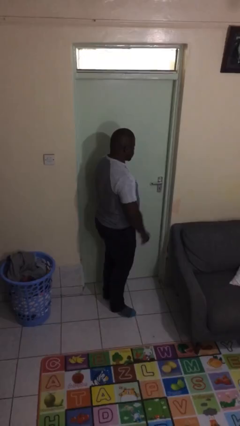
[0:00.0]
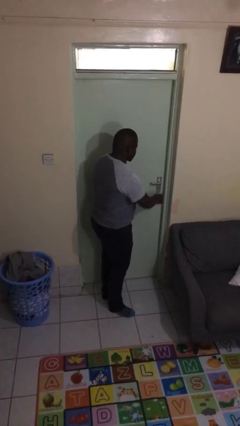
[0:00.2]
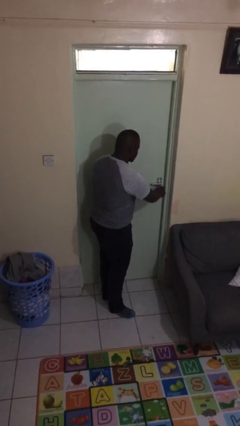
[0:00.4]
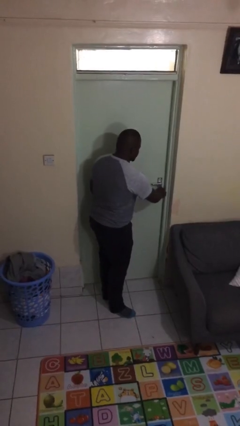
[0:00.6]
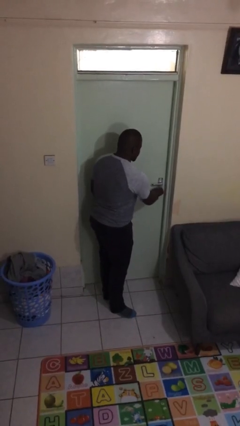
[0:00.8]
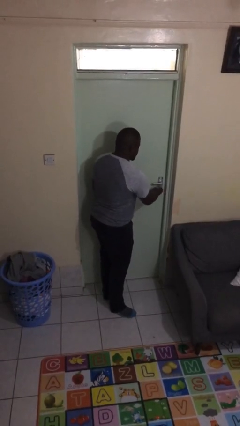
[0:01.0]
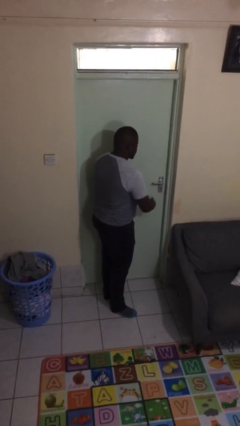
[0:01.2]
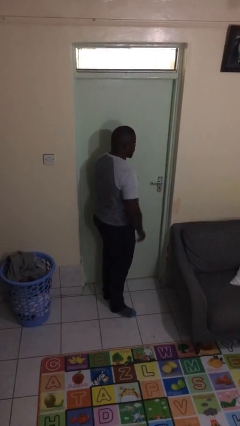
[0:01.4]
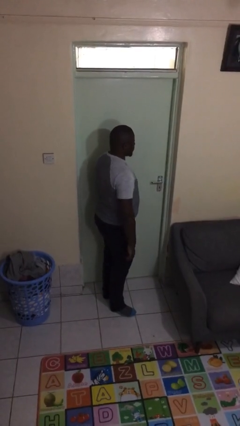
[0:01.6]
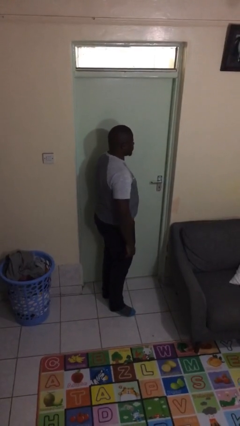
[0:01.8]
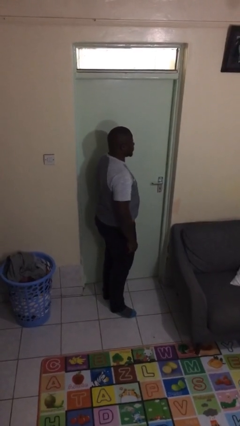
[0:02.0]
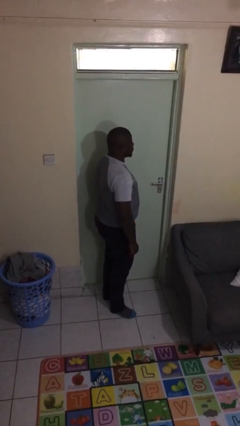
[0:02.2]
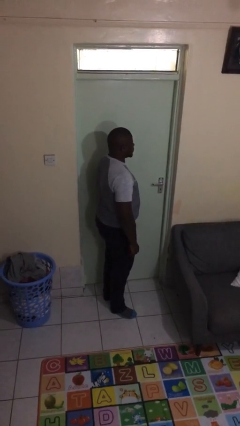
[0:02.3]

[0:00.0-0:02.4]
person locks door with keys

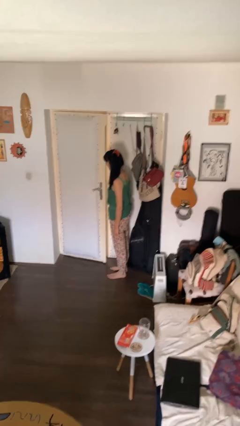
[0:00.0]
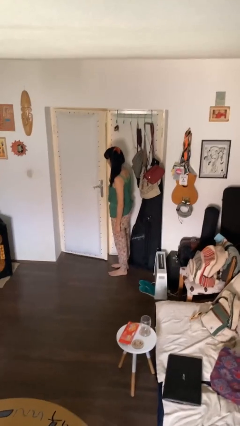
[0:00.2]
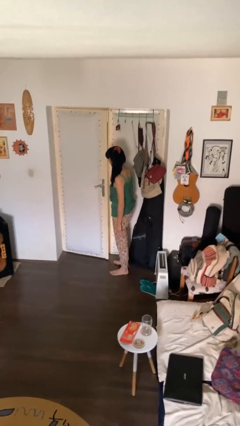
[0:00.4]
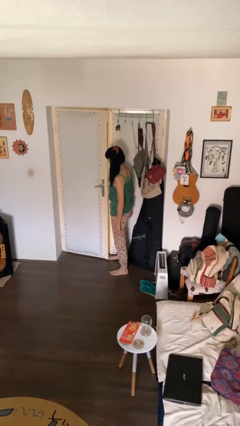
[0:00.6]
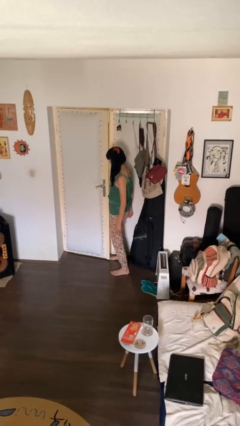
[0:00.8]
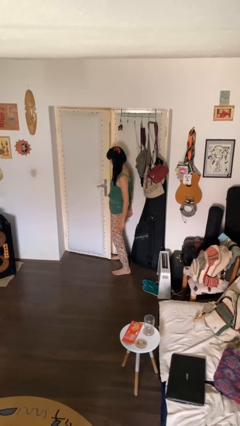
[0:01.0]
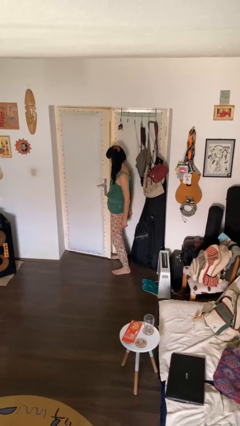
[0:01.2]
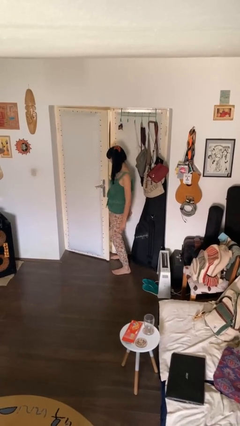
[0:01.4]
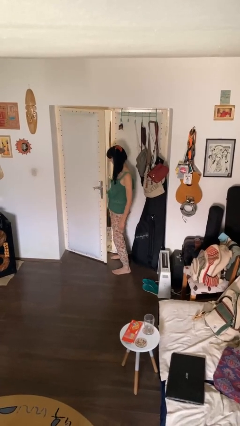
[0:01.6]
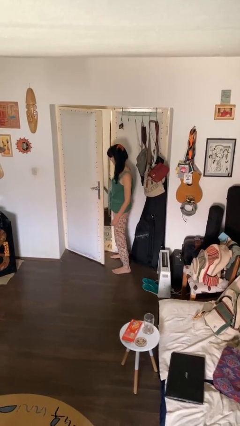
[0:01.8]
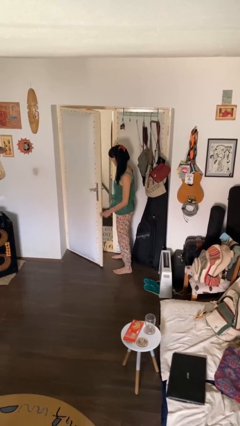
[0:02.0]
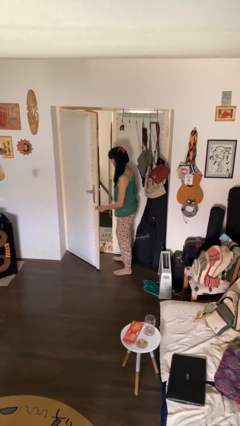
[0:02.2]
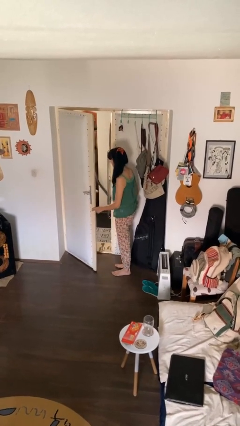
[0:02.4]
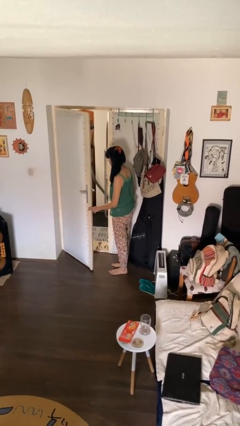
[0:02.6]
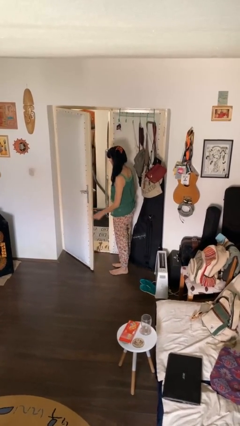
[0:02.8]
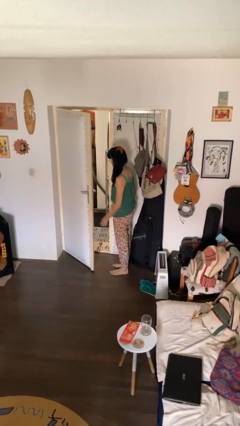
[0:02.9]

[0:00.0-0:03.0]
person opens facility door

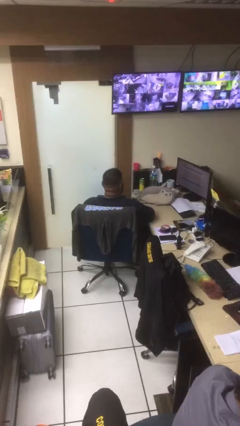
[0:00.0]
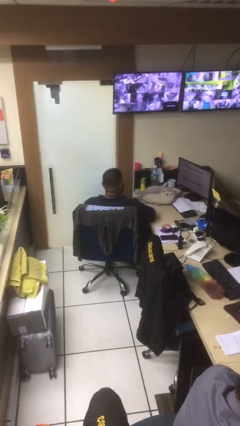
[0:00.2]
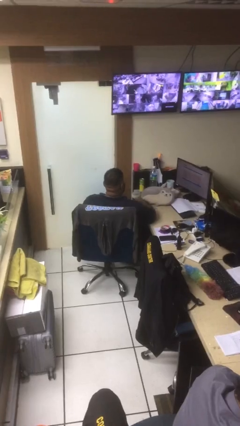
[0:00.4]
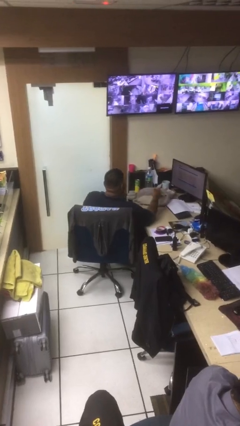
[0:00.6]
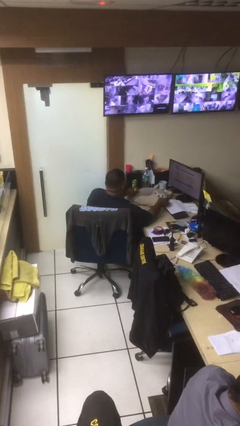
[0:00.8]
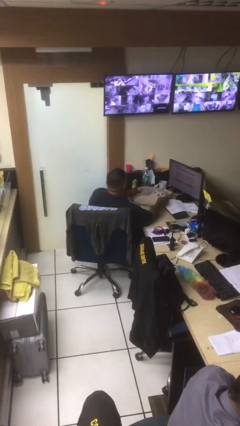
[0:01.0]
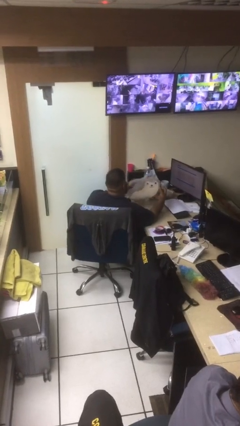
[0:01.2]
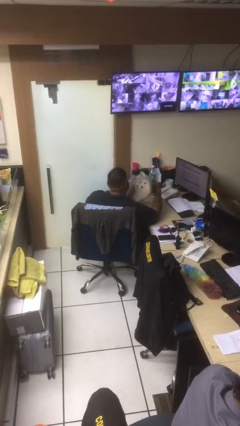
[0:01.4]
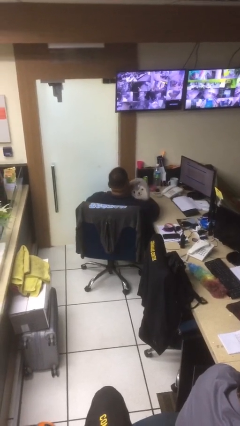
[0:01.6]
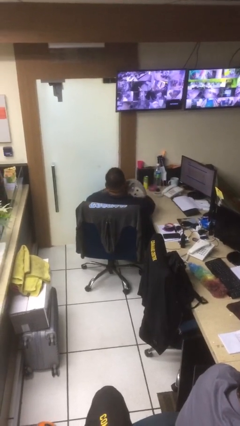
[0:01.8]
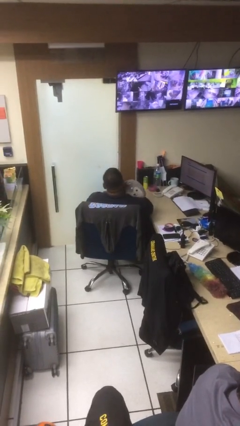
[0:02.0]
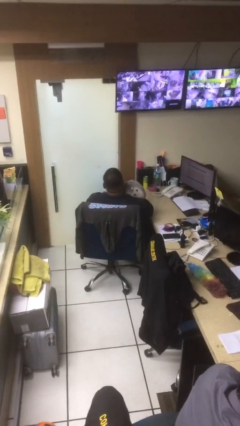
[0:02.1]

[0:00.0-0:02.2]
person hugs stuffed animal

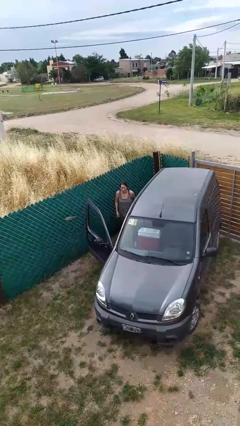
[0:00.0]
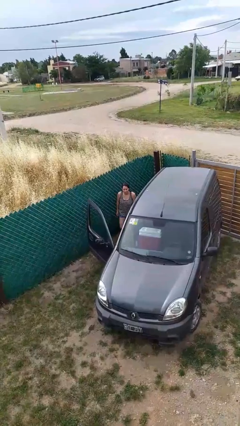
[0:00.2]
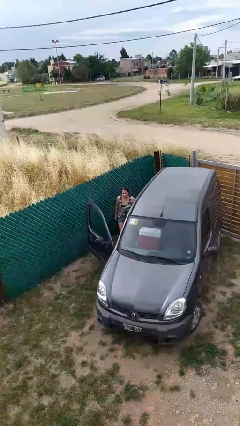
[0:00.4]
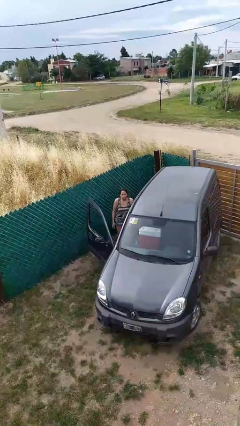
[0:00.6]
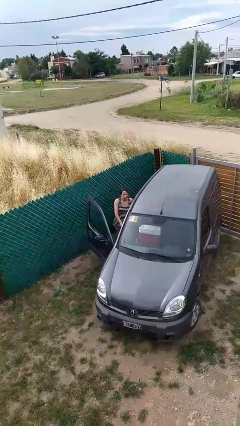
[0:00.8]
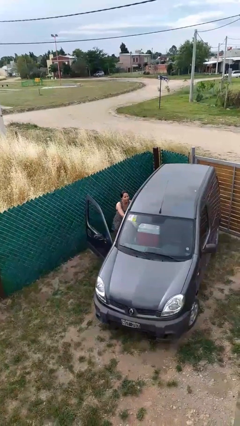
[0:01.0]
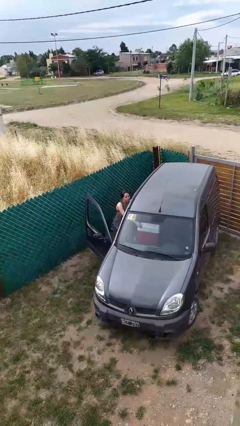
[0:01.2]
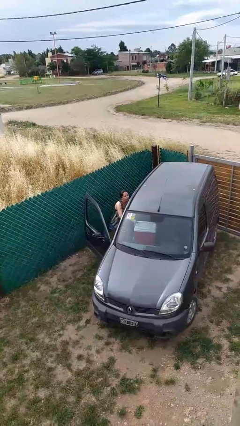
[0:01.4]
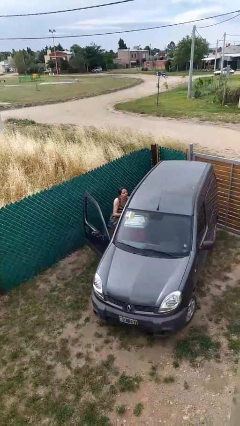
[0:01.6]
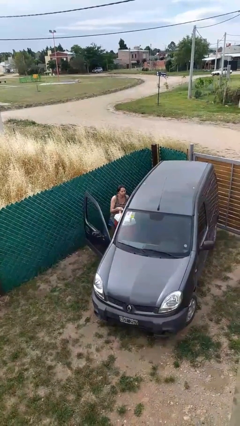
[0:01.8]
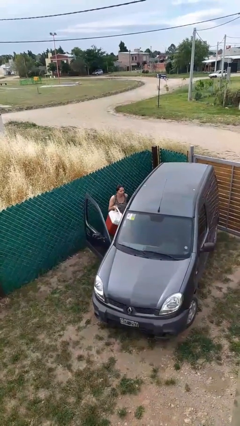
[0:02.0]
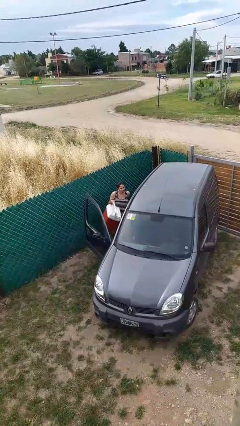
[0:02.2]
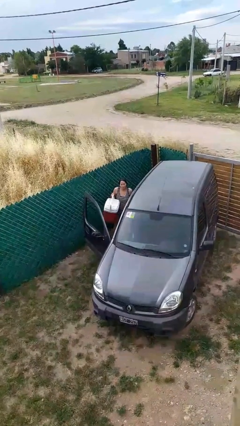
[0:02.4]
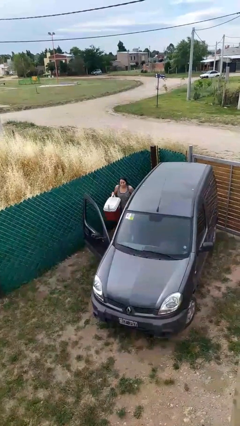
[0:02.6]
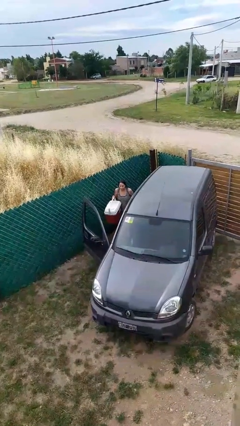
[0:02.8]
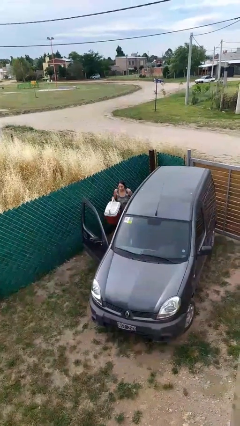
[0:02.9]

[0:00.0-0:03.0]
person unloads car

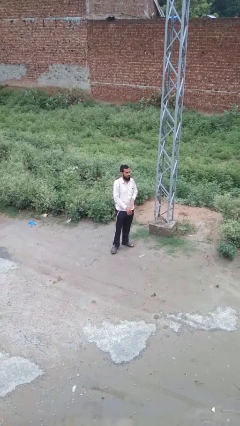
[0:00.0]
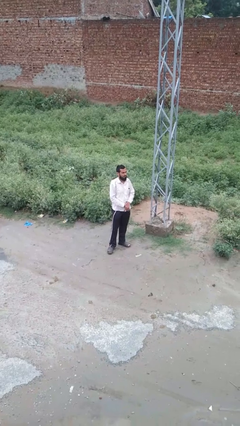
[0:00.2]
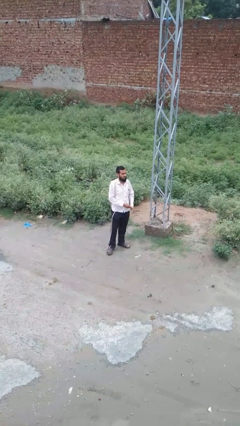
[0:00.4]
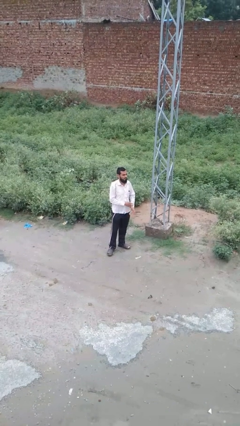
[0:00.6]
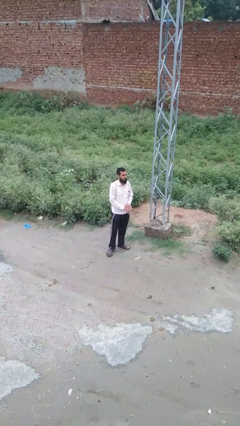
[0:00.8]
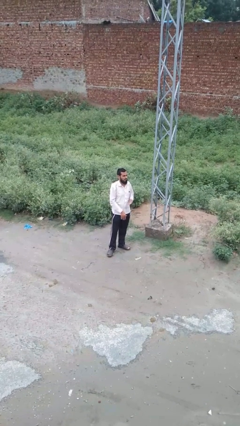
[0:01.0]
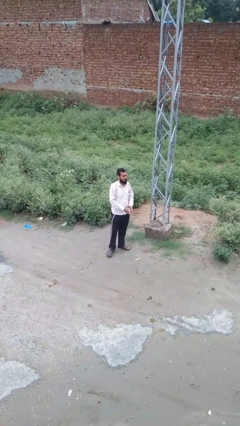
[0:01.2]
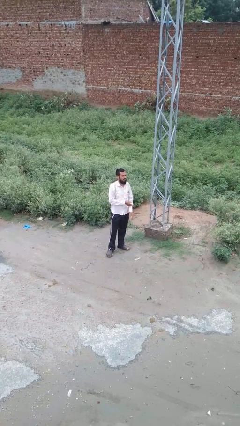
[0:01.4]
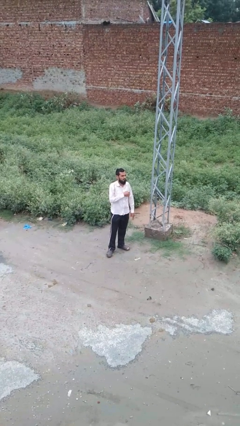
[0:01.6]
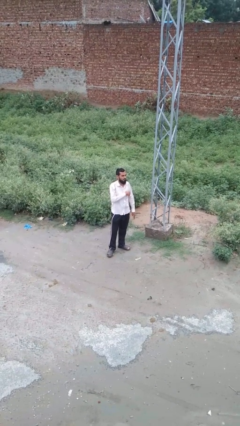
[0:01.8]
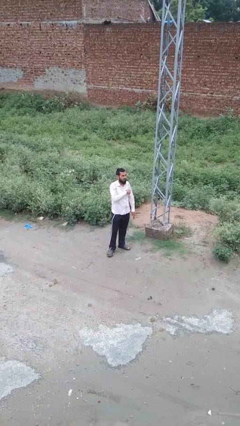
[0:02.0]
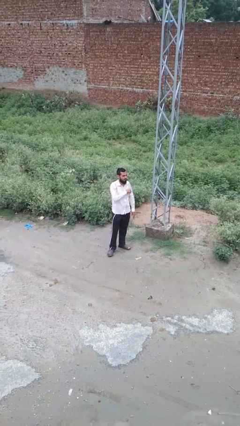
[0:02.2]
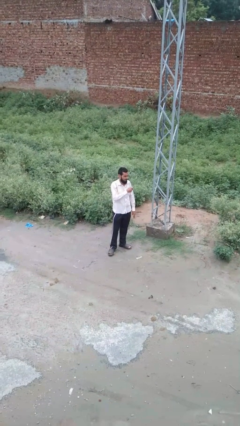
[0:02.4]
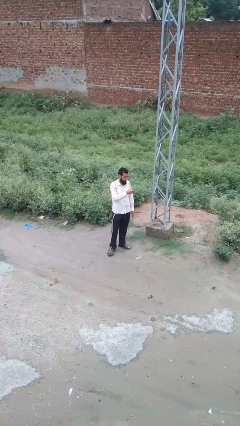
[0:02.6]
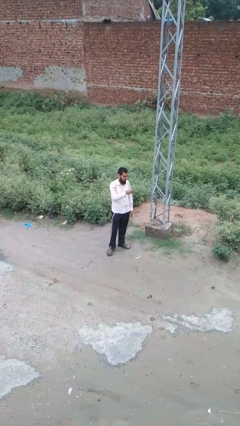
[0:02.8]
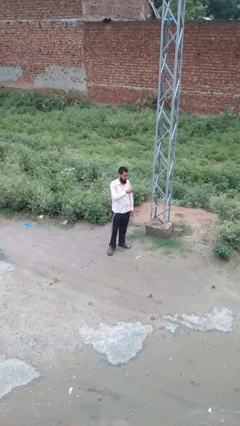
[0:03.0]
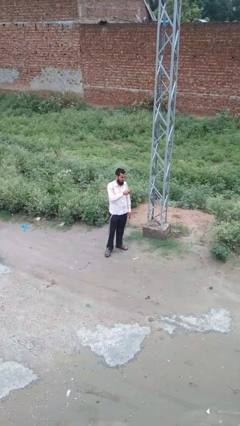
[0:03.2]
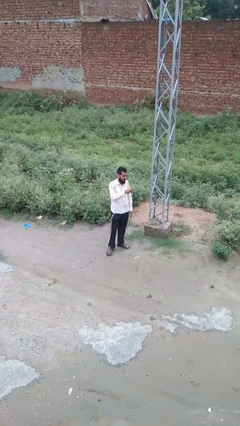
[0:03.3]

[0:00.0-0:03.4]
person takes phone from pocket

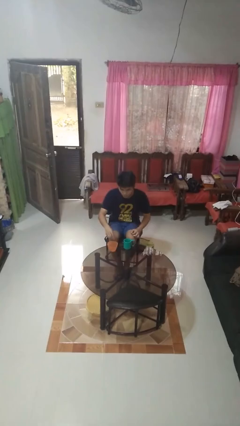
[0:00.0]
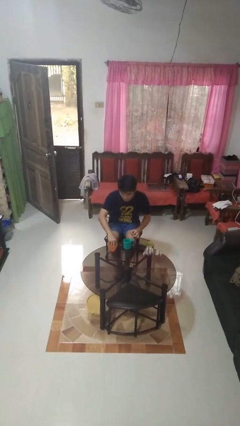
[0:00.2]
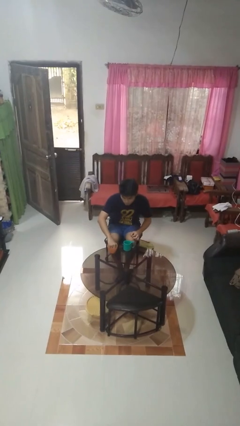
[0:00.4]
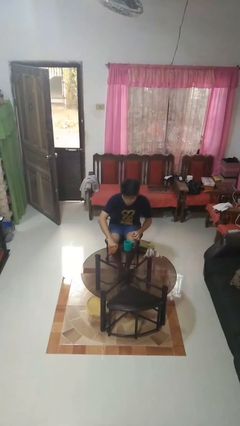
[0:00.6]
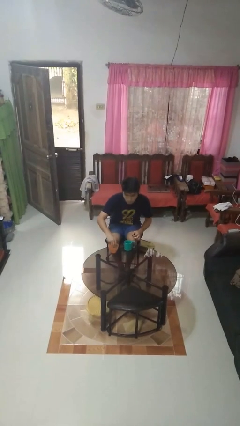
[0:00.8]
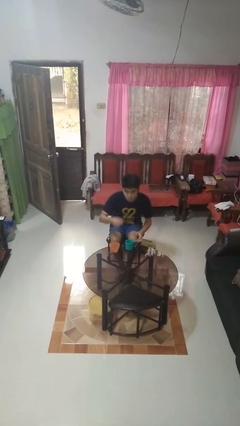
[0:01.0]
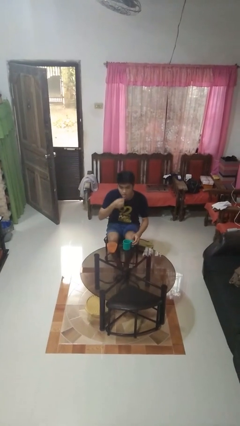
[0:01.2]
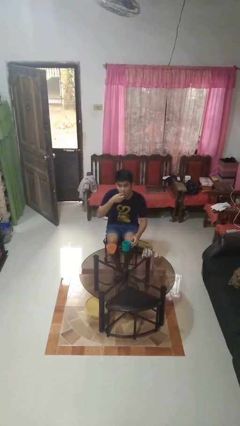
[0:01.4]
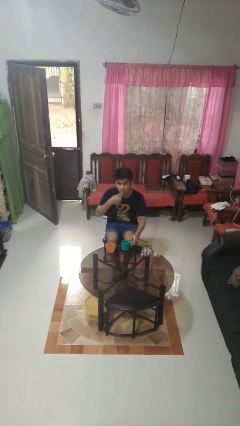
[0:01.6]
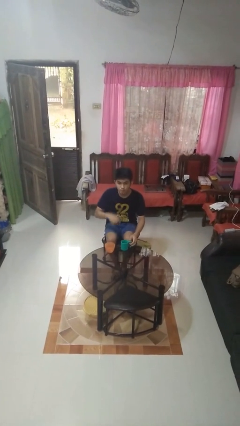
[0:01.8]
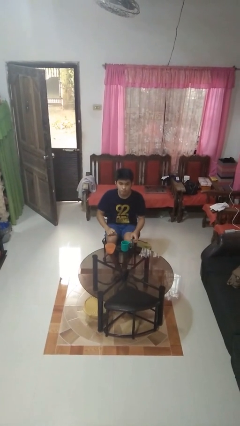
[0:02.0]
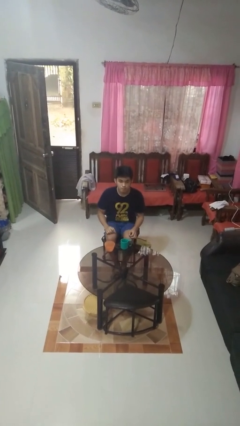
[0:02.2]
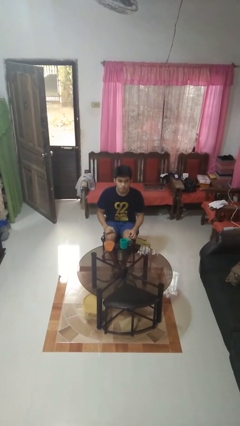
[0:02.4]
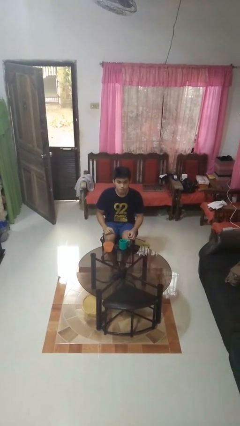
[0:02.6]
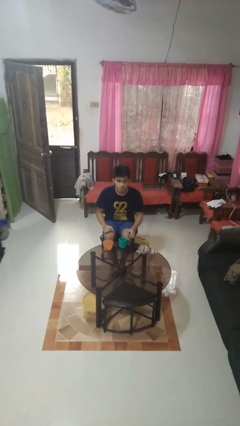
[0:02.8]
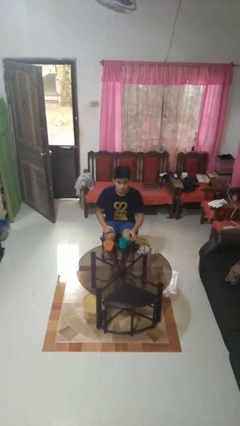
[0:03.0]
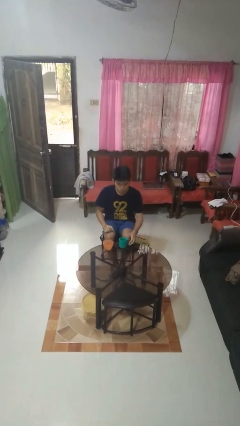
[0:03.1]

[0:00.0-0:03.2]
person takes medicine pills
